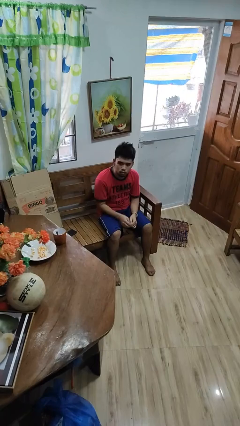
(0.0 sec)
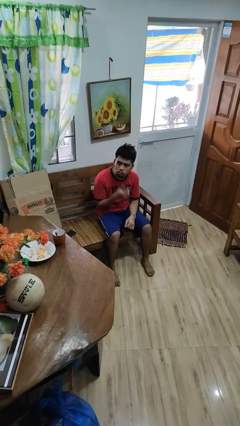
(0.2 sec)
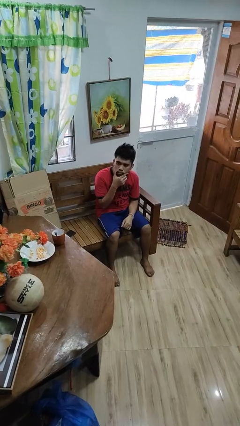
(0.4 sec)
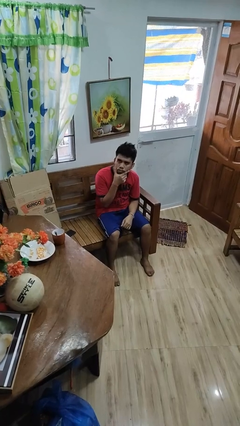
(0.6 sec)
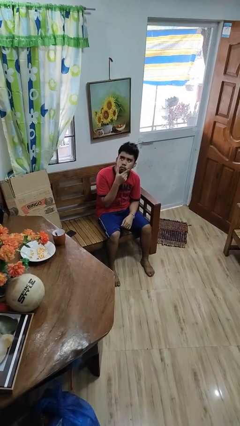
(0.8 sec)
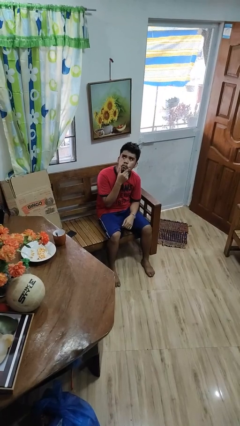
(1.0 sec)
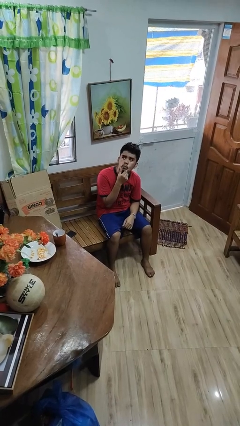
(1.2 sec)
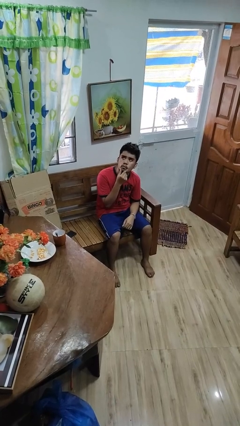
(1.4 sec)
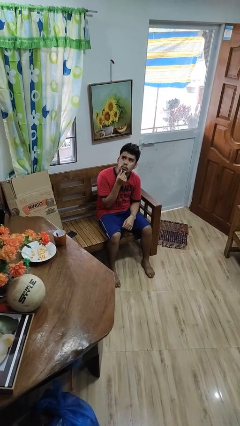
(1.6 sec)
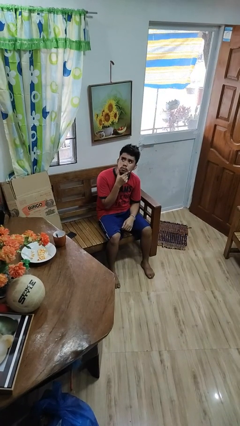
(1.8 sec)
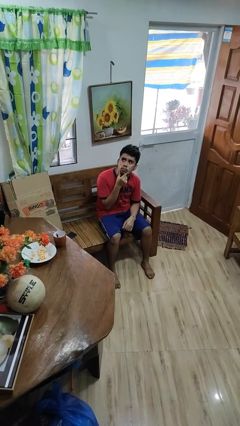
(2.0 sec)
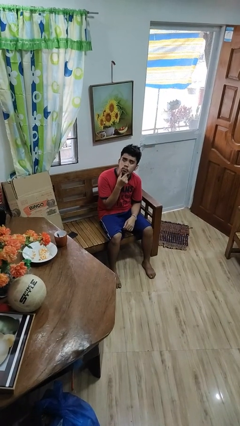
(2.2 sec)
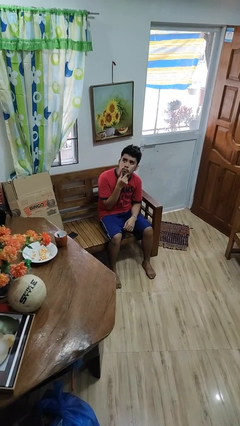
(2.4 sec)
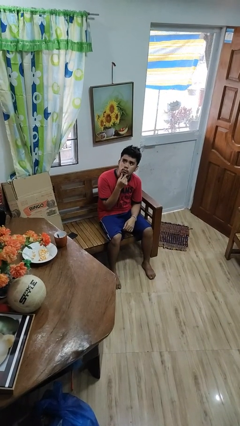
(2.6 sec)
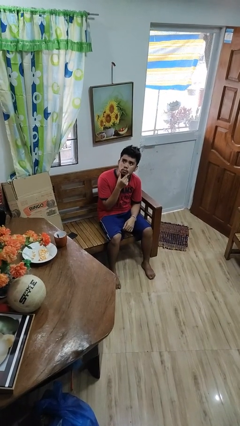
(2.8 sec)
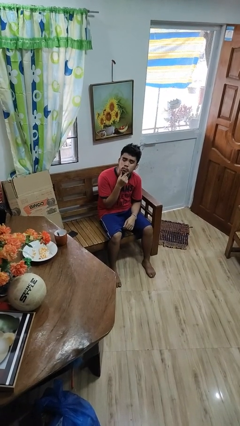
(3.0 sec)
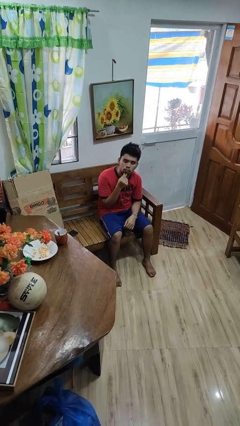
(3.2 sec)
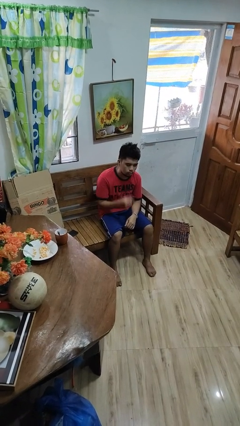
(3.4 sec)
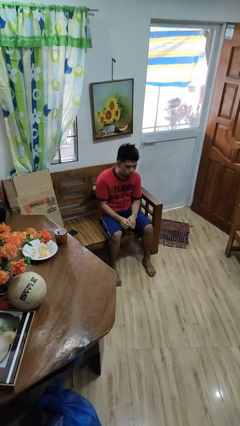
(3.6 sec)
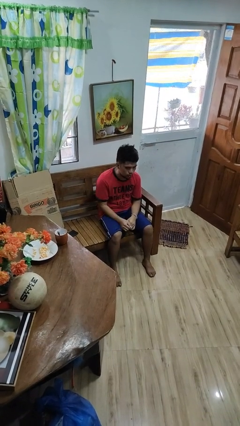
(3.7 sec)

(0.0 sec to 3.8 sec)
person strokes chin

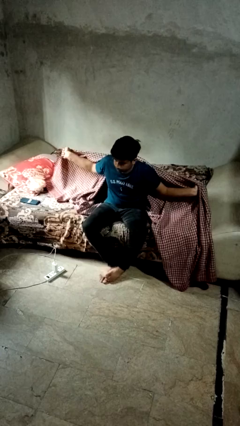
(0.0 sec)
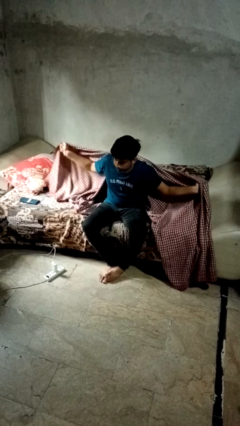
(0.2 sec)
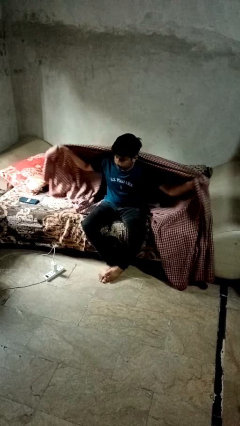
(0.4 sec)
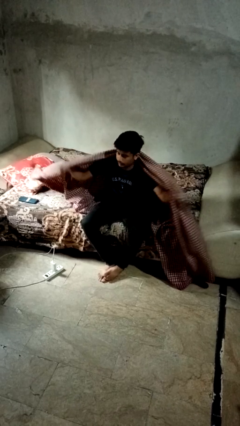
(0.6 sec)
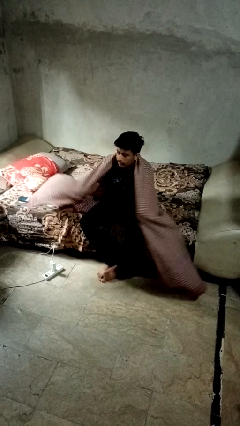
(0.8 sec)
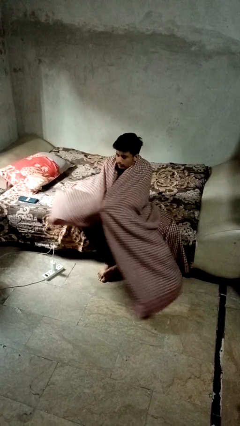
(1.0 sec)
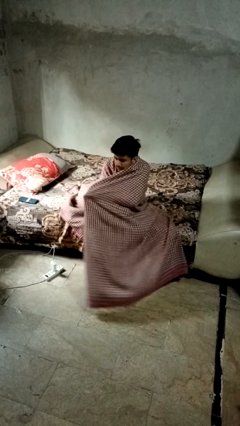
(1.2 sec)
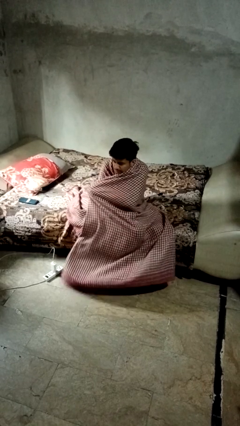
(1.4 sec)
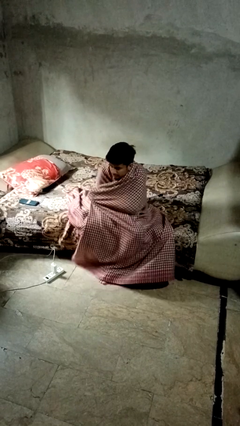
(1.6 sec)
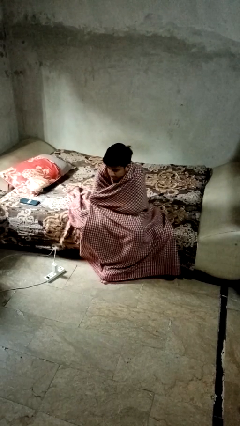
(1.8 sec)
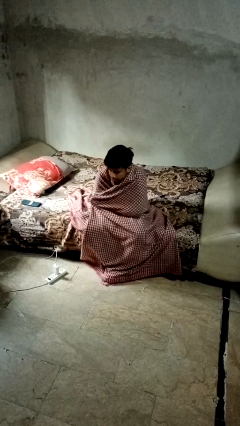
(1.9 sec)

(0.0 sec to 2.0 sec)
person covers with blanket

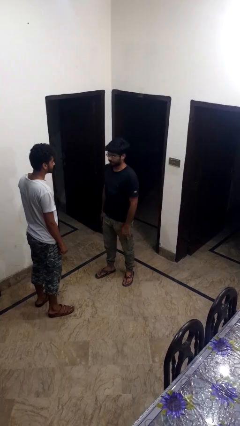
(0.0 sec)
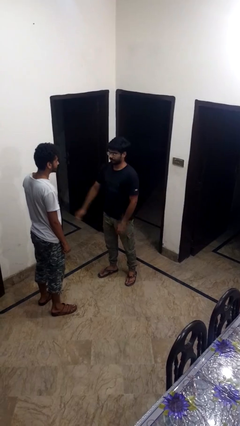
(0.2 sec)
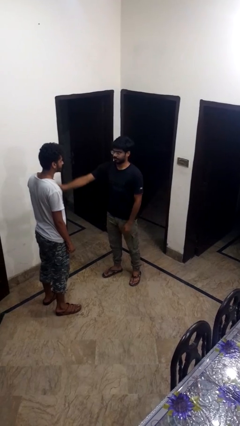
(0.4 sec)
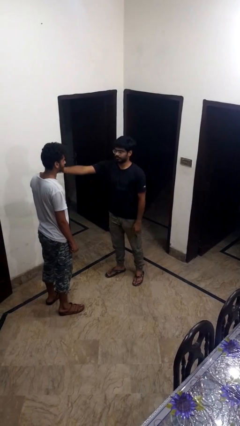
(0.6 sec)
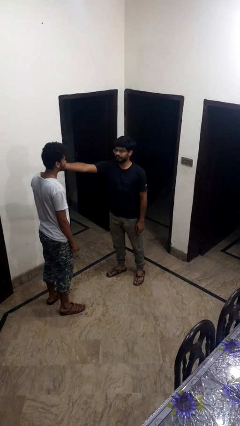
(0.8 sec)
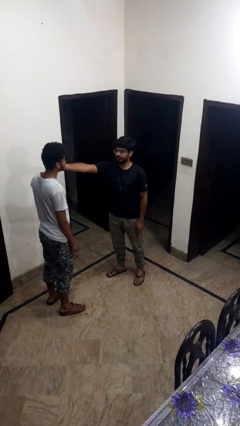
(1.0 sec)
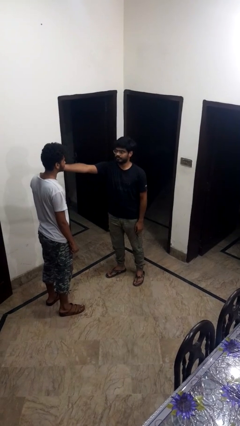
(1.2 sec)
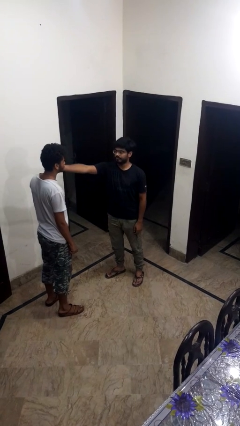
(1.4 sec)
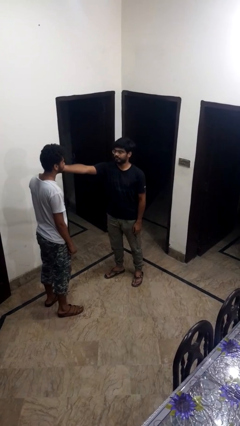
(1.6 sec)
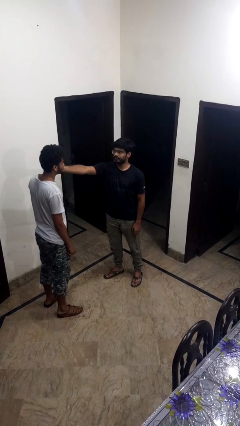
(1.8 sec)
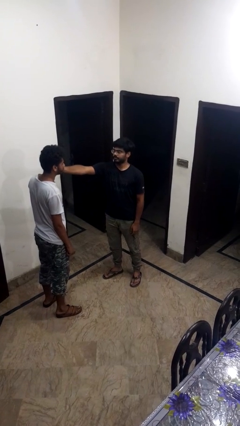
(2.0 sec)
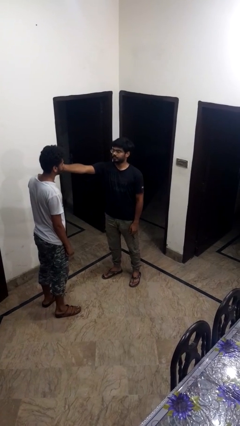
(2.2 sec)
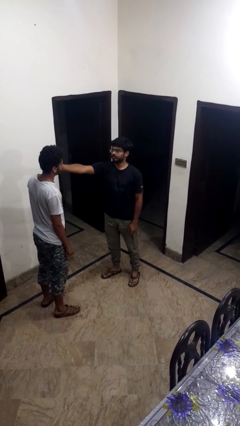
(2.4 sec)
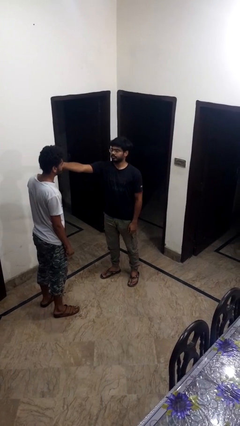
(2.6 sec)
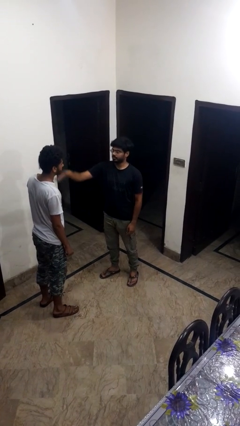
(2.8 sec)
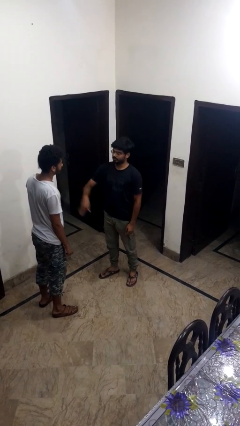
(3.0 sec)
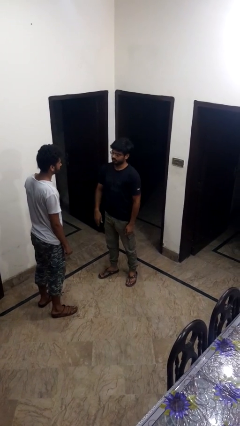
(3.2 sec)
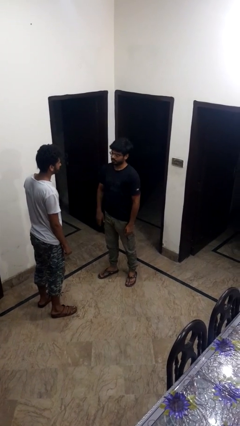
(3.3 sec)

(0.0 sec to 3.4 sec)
person touches face of person

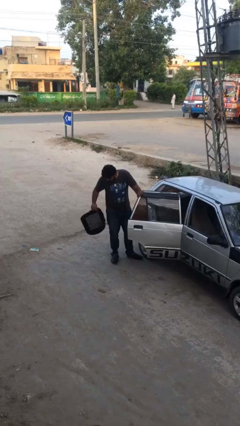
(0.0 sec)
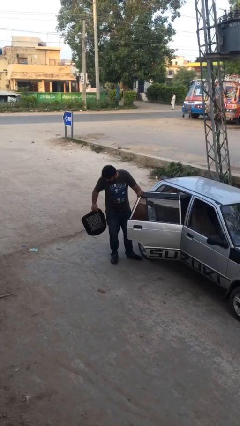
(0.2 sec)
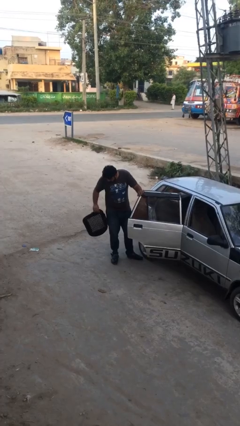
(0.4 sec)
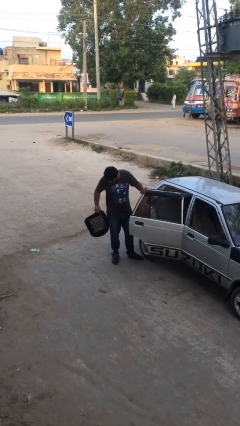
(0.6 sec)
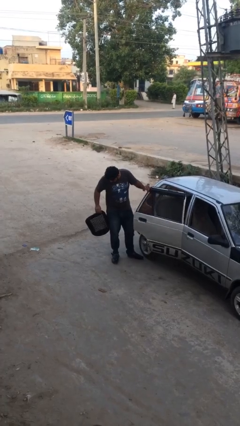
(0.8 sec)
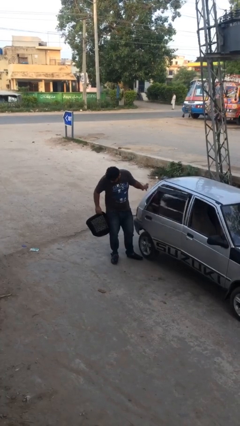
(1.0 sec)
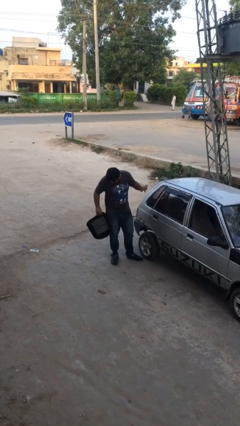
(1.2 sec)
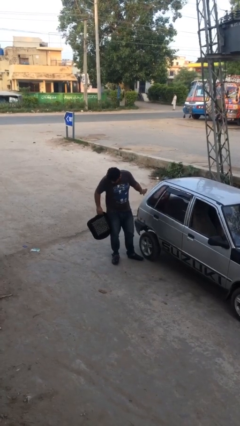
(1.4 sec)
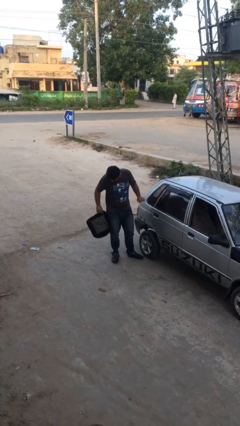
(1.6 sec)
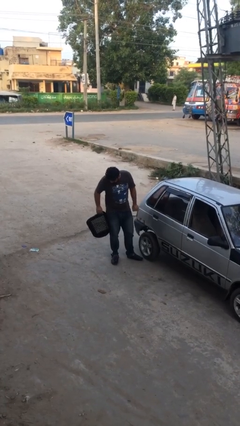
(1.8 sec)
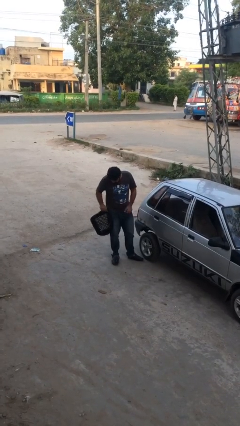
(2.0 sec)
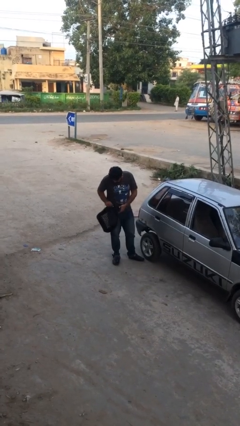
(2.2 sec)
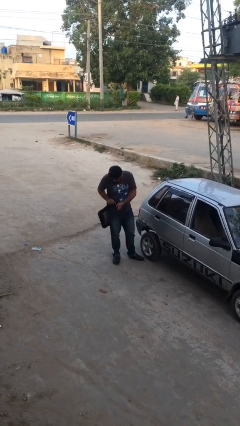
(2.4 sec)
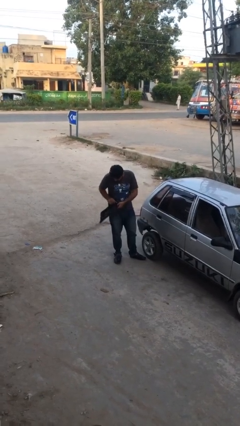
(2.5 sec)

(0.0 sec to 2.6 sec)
person closes car door

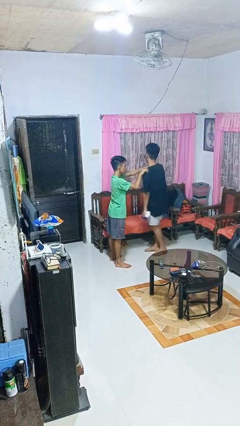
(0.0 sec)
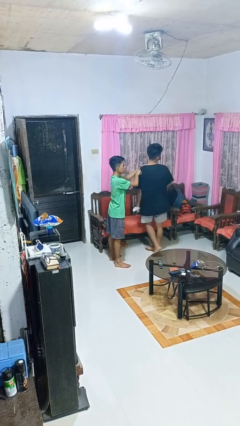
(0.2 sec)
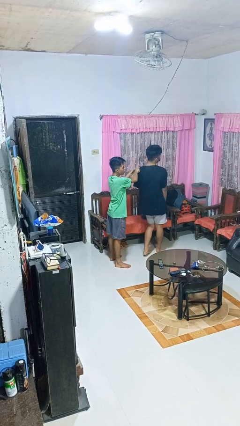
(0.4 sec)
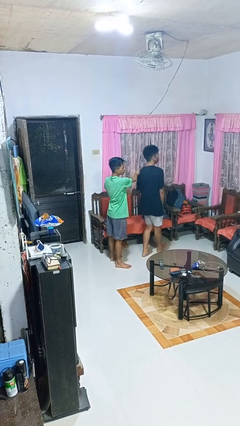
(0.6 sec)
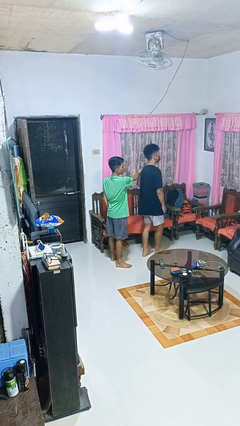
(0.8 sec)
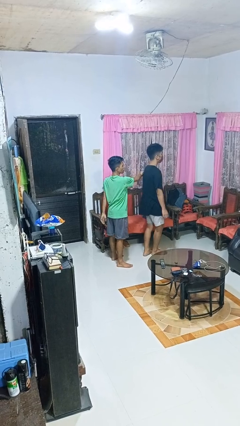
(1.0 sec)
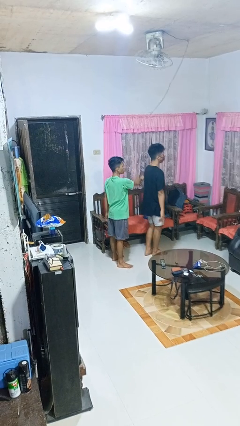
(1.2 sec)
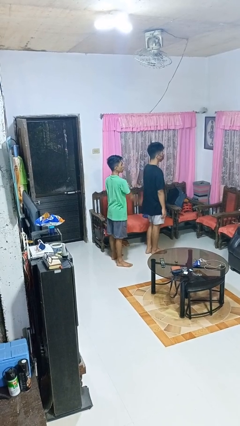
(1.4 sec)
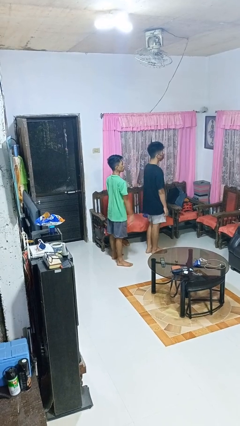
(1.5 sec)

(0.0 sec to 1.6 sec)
person spins person around

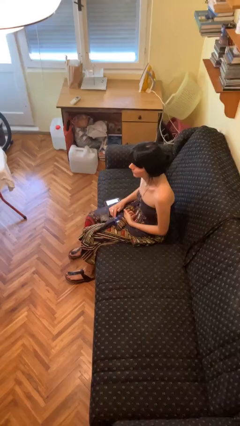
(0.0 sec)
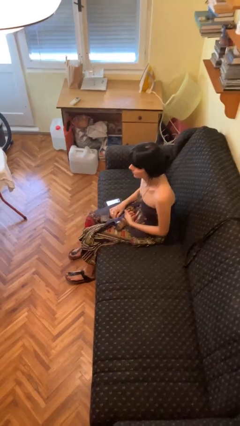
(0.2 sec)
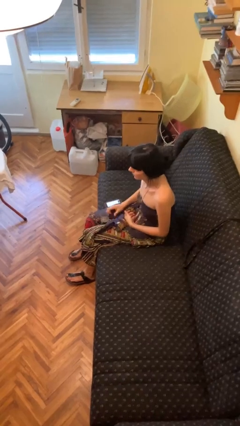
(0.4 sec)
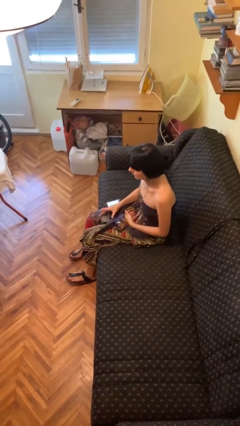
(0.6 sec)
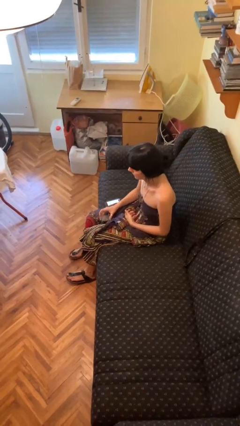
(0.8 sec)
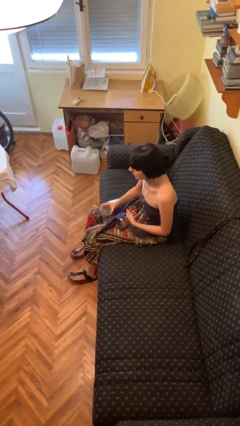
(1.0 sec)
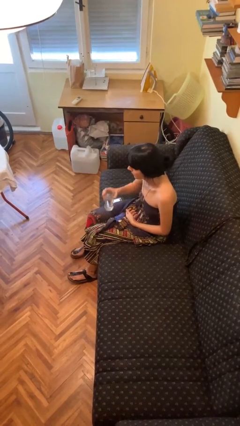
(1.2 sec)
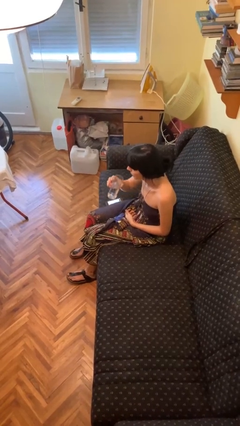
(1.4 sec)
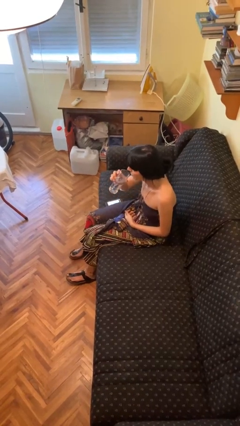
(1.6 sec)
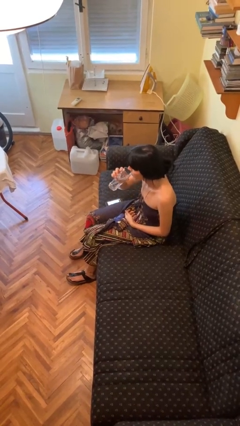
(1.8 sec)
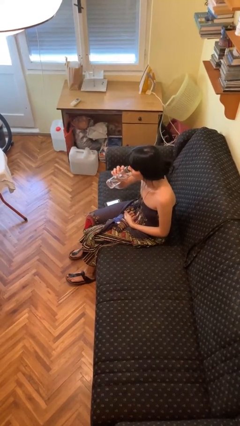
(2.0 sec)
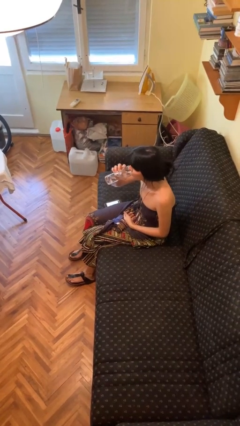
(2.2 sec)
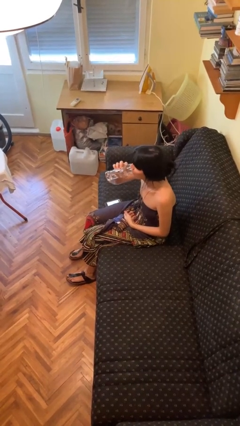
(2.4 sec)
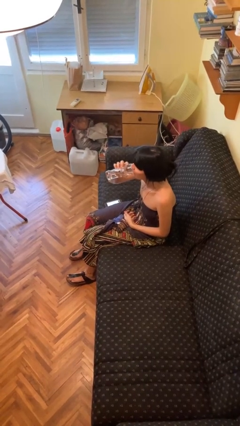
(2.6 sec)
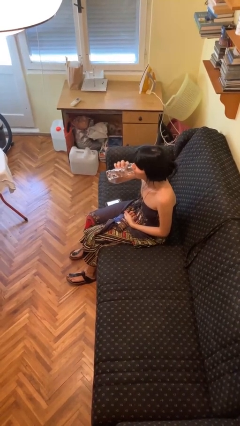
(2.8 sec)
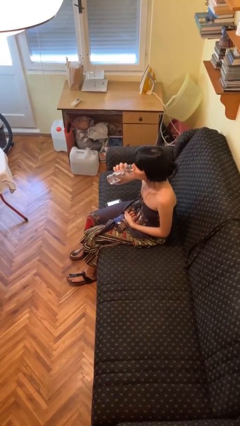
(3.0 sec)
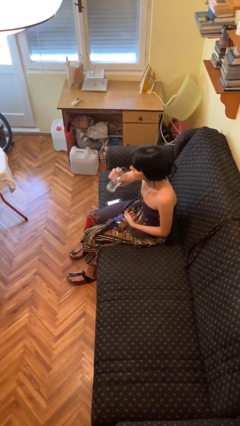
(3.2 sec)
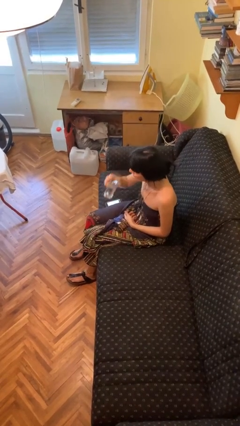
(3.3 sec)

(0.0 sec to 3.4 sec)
person drinks from cup

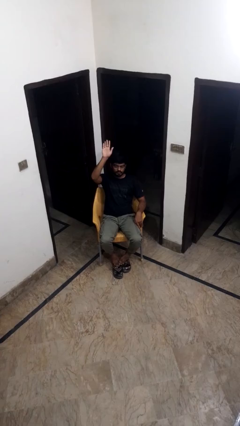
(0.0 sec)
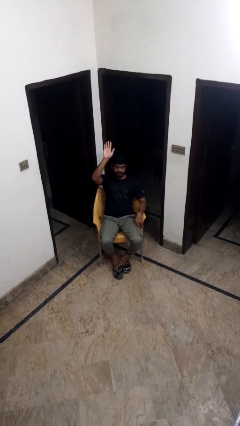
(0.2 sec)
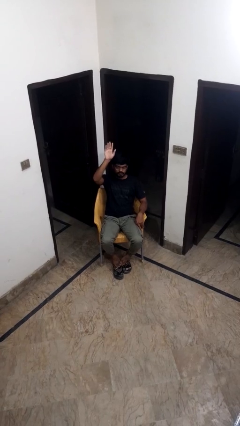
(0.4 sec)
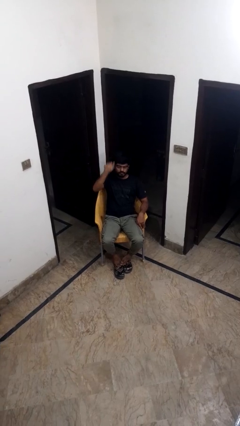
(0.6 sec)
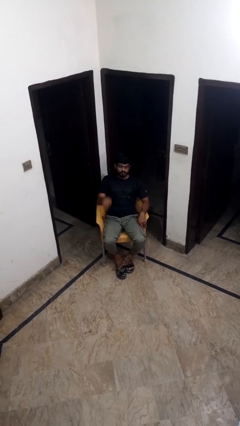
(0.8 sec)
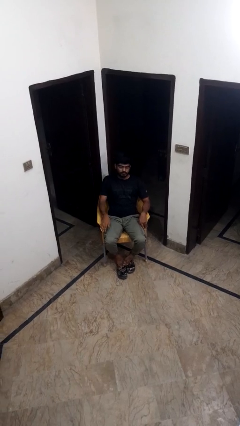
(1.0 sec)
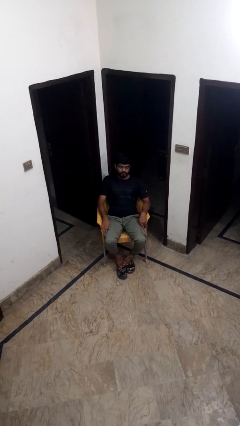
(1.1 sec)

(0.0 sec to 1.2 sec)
person gestures lower hand
